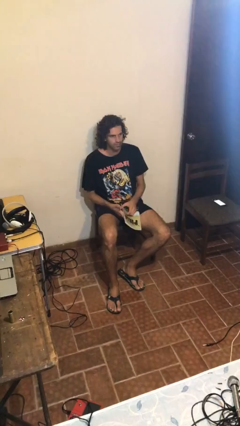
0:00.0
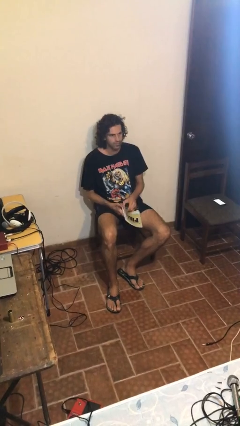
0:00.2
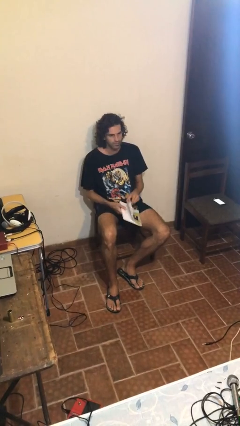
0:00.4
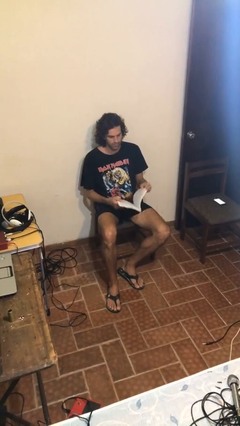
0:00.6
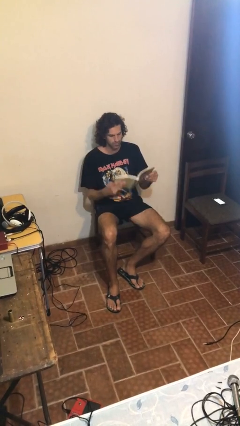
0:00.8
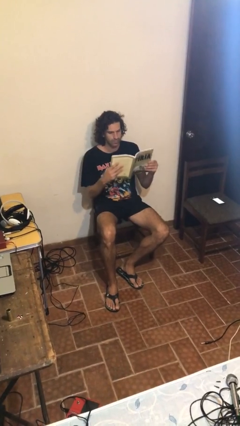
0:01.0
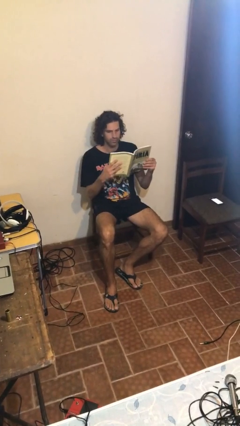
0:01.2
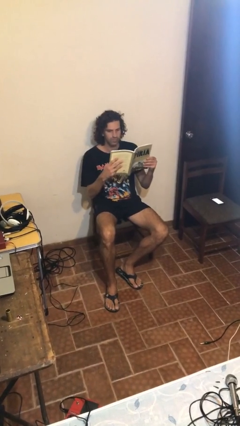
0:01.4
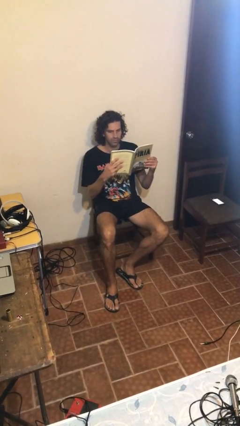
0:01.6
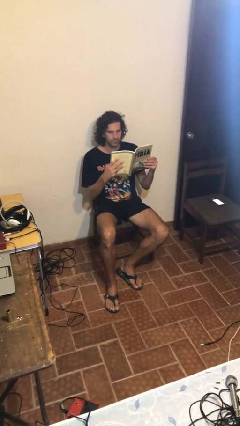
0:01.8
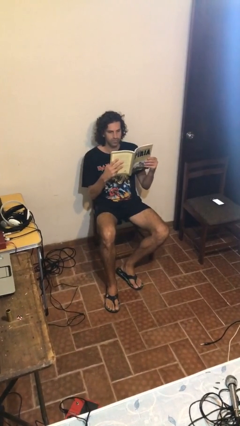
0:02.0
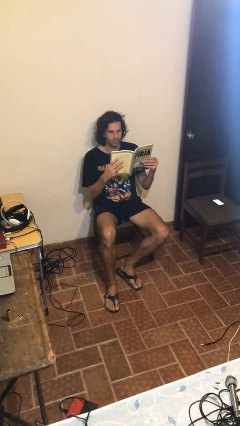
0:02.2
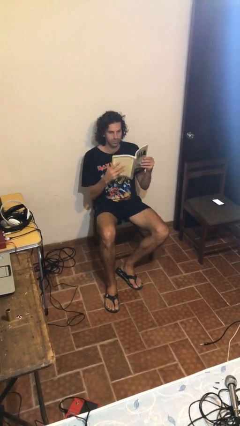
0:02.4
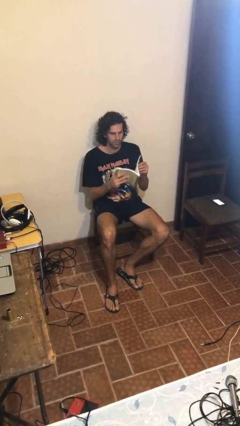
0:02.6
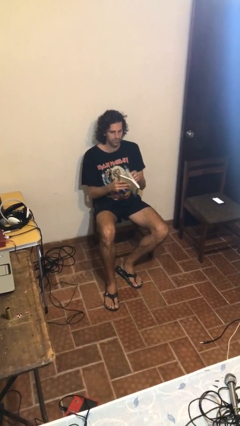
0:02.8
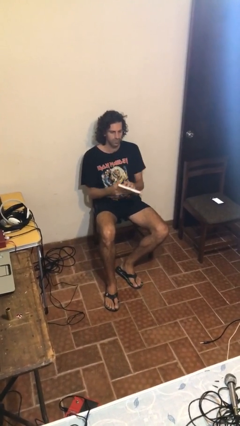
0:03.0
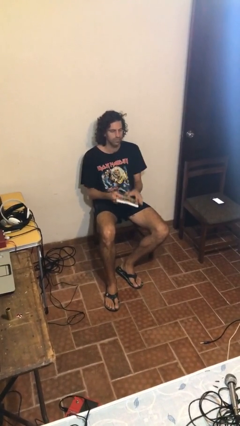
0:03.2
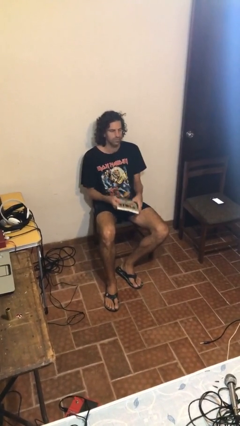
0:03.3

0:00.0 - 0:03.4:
person reads document

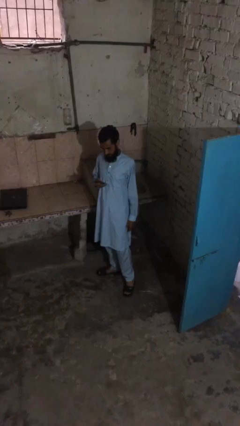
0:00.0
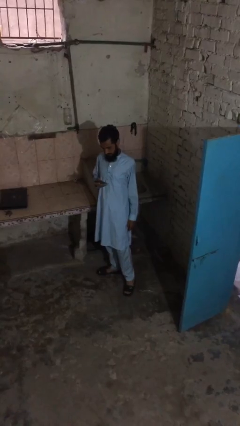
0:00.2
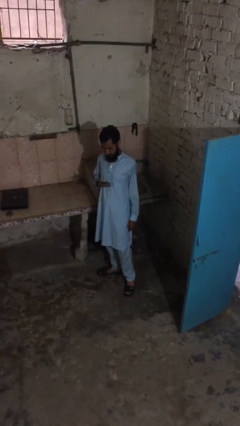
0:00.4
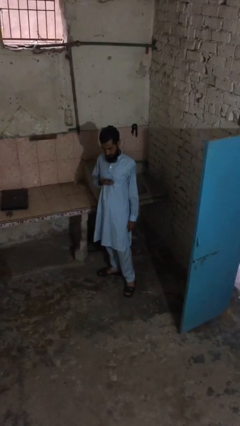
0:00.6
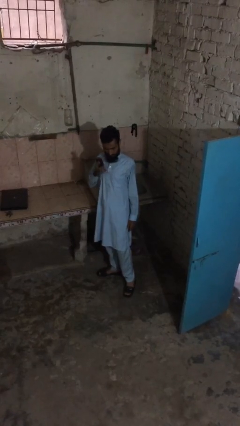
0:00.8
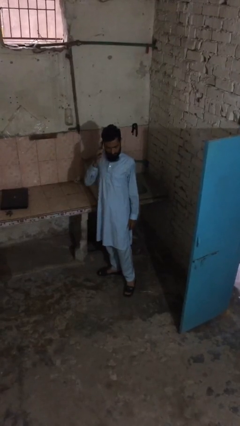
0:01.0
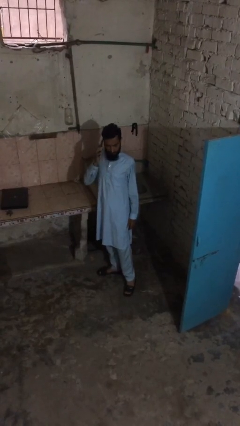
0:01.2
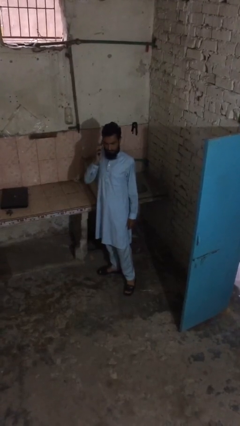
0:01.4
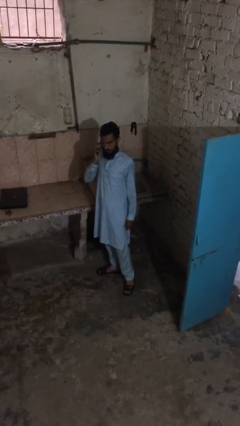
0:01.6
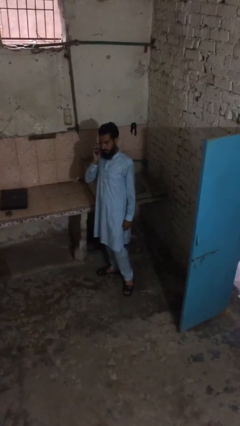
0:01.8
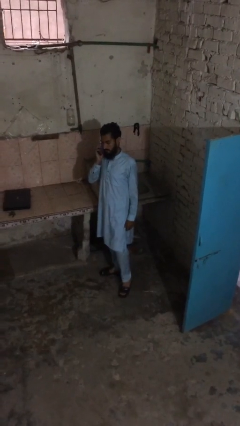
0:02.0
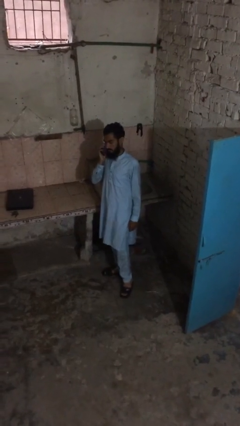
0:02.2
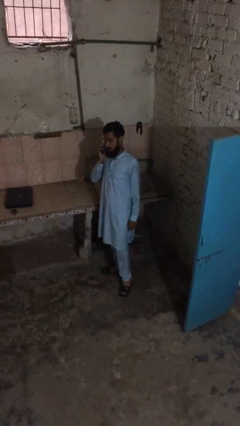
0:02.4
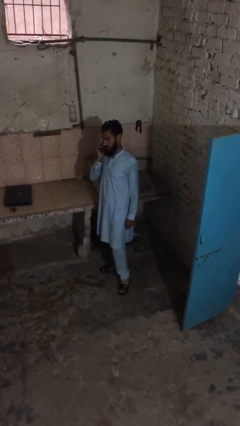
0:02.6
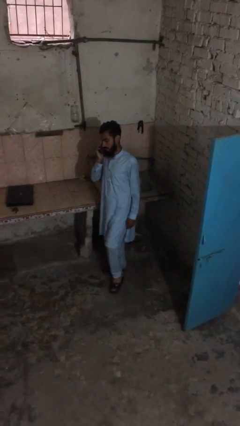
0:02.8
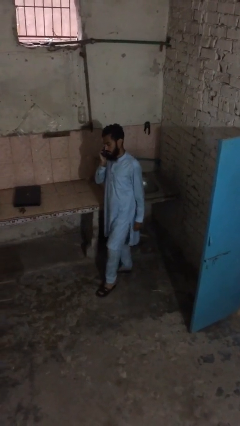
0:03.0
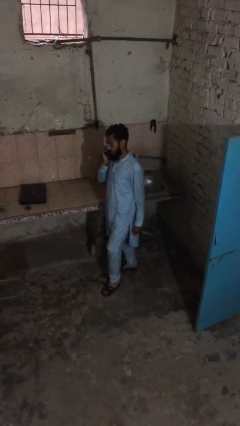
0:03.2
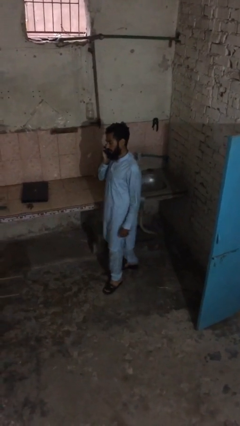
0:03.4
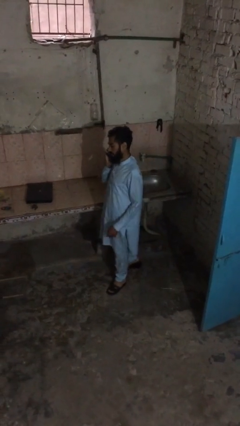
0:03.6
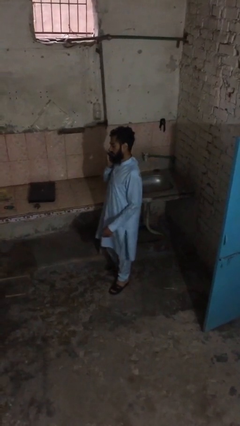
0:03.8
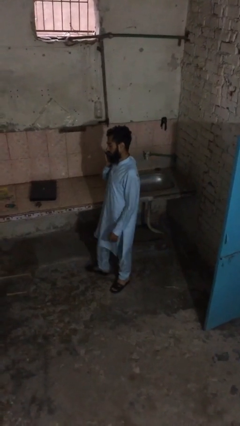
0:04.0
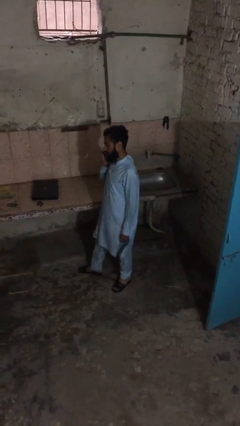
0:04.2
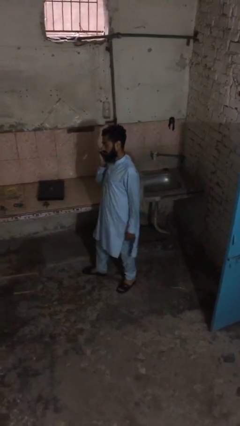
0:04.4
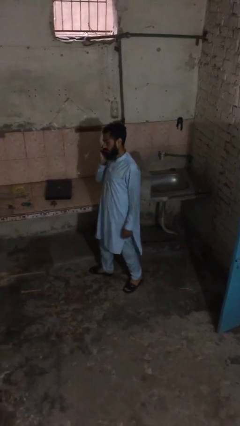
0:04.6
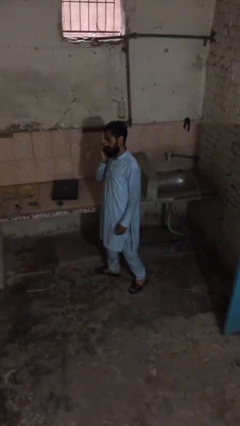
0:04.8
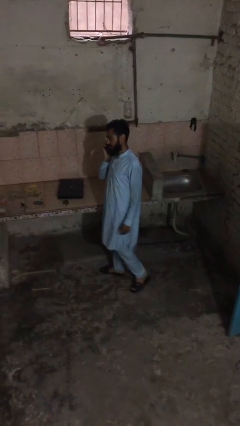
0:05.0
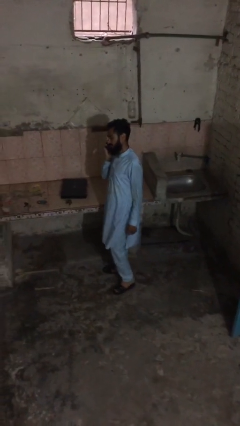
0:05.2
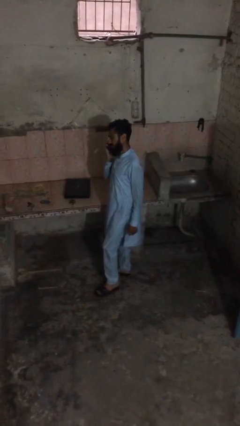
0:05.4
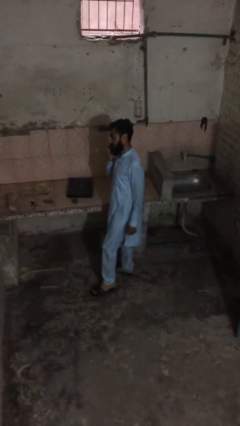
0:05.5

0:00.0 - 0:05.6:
person talks on phone

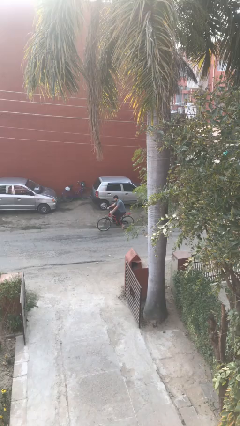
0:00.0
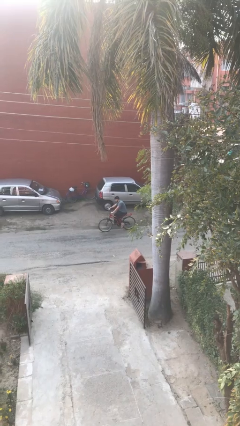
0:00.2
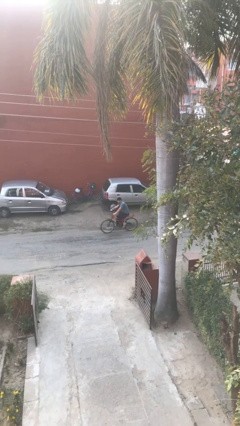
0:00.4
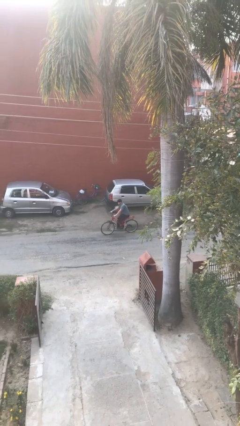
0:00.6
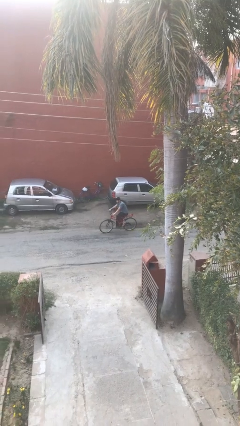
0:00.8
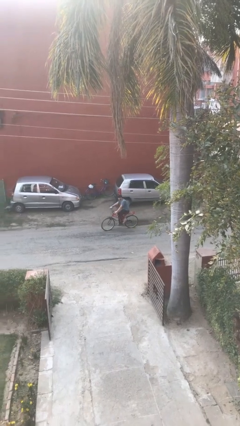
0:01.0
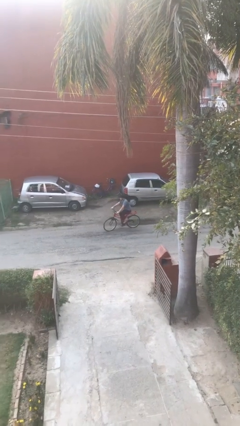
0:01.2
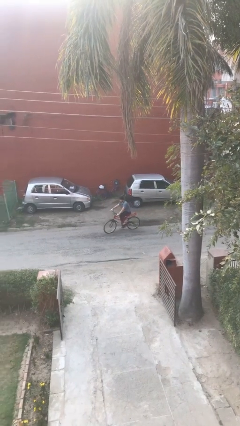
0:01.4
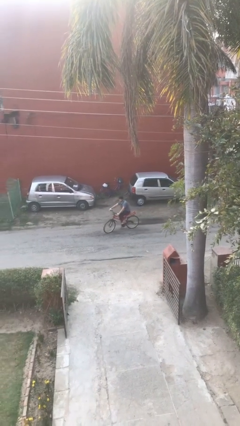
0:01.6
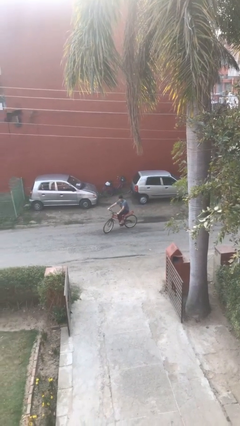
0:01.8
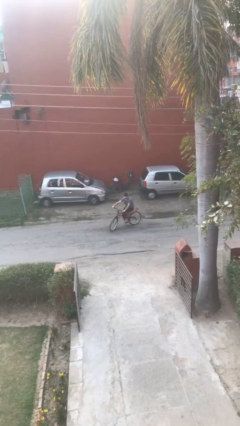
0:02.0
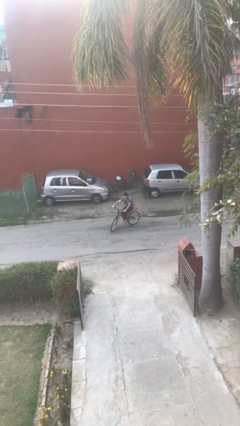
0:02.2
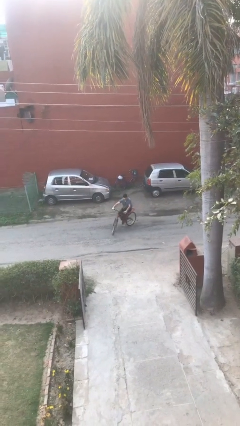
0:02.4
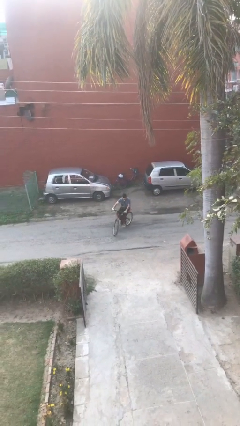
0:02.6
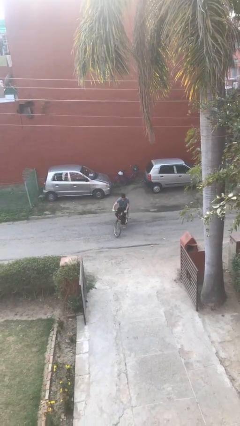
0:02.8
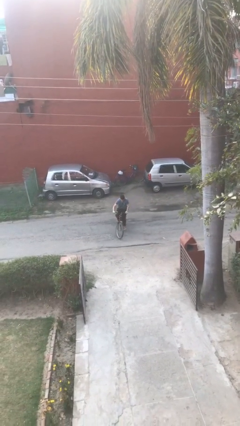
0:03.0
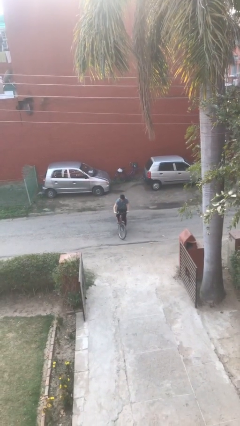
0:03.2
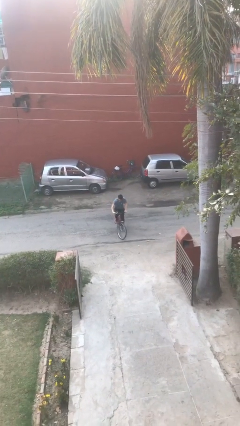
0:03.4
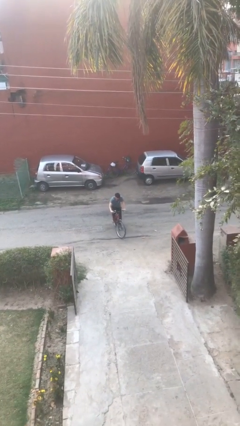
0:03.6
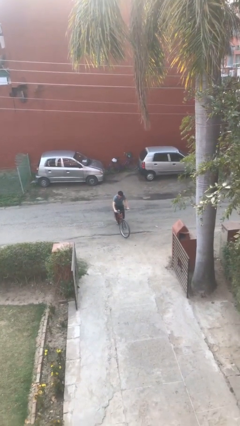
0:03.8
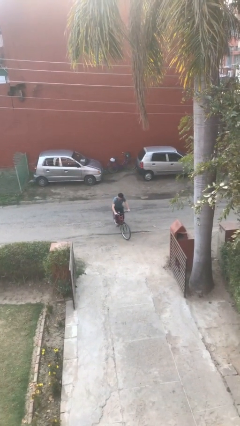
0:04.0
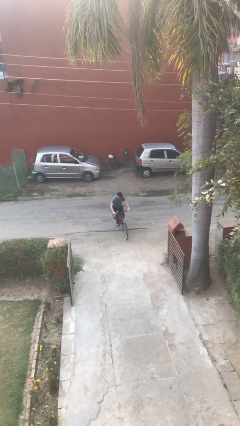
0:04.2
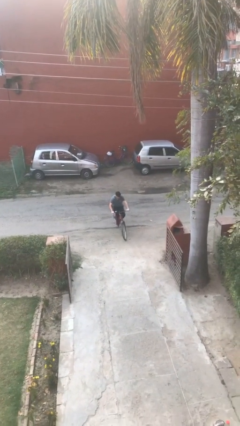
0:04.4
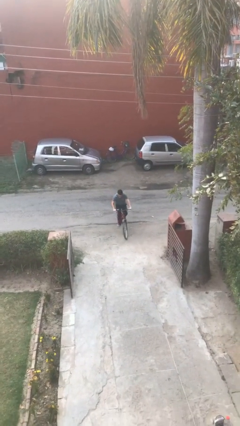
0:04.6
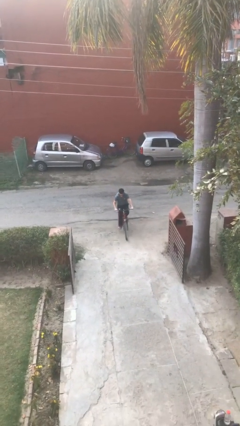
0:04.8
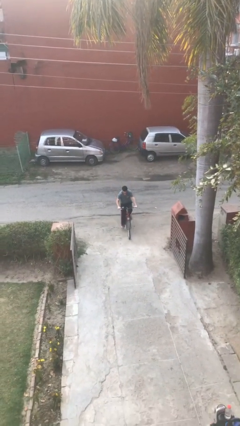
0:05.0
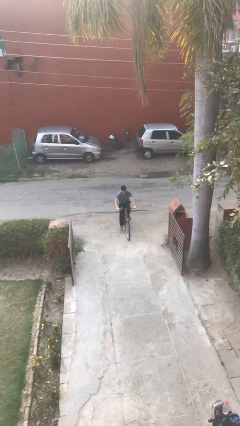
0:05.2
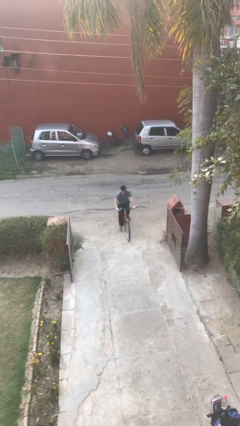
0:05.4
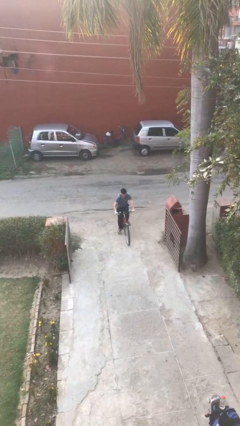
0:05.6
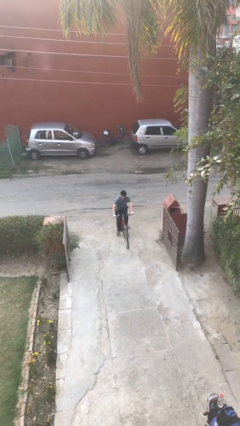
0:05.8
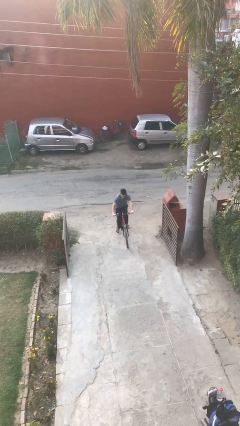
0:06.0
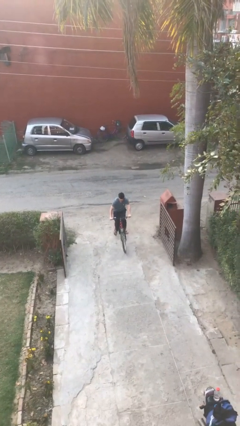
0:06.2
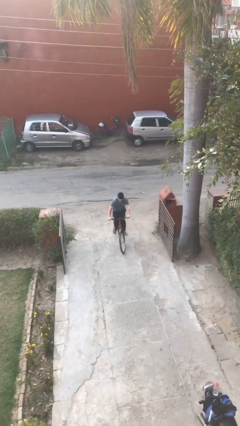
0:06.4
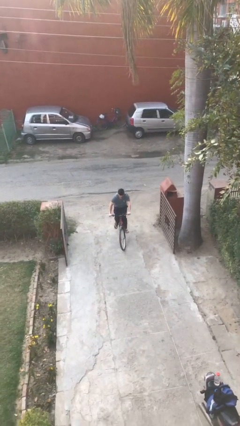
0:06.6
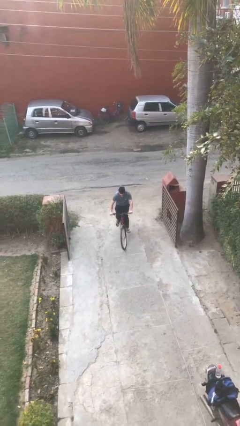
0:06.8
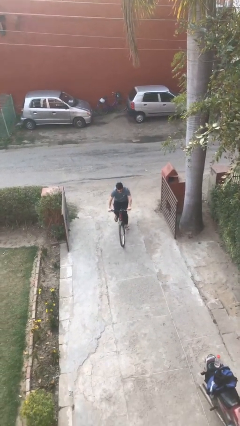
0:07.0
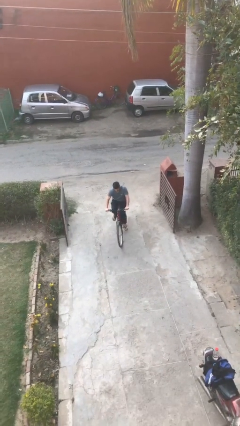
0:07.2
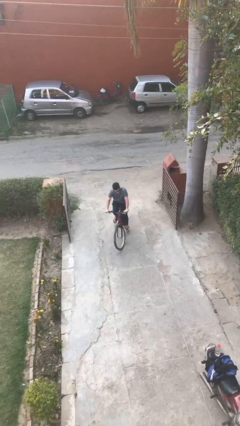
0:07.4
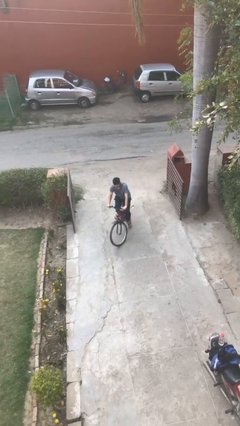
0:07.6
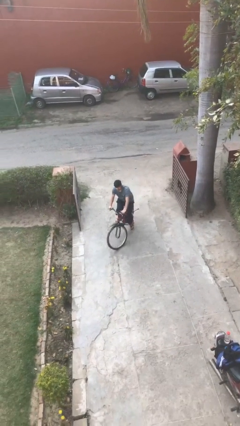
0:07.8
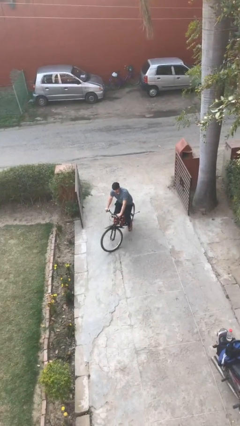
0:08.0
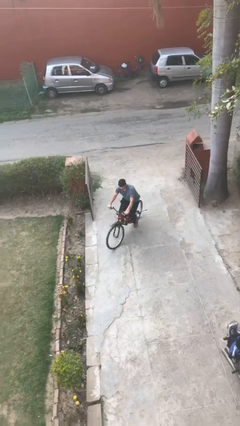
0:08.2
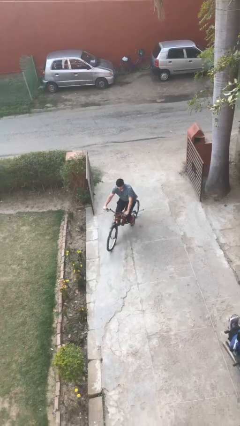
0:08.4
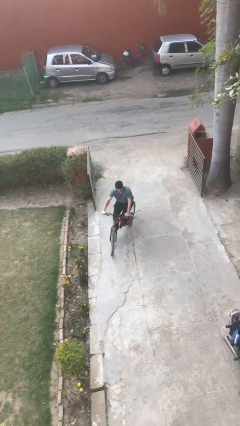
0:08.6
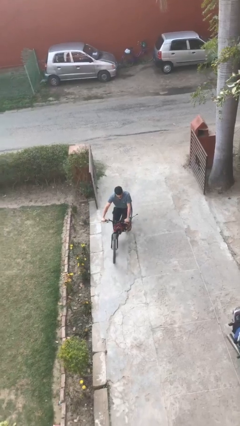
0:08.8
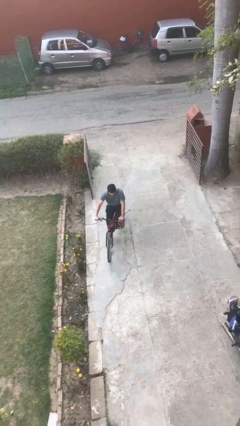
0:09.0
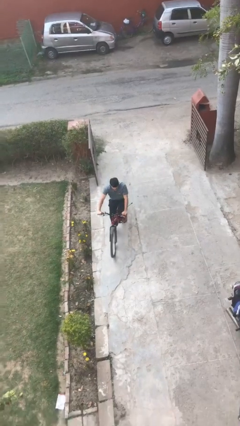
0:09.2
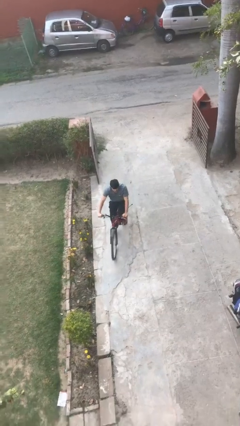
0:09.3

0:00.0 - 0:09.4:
person rides bicycle
